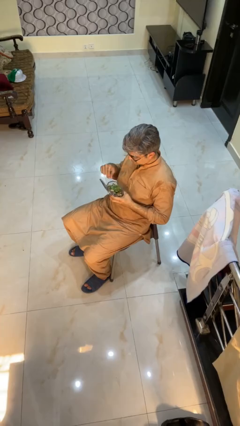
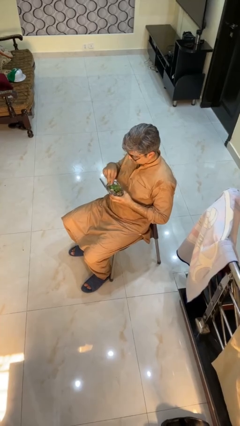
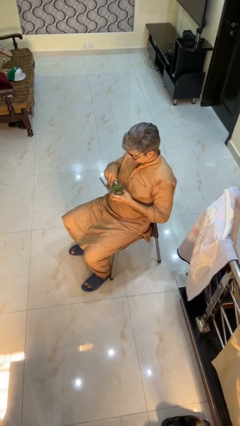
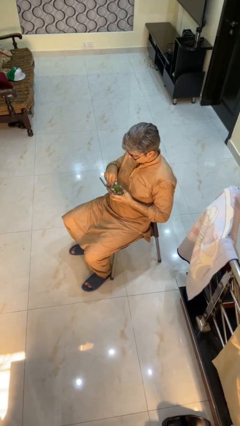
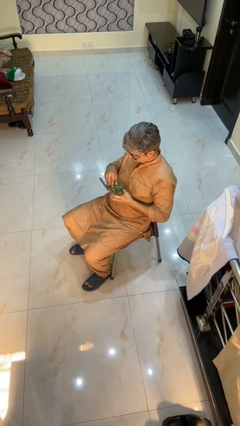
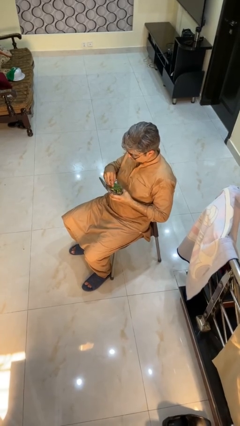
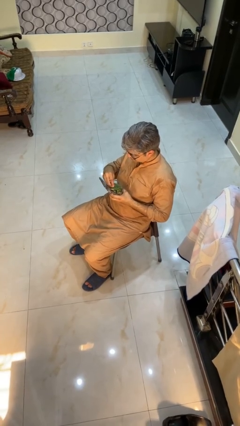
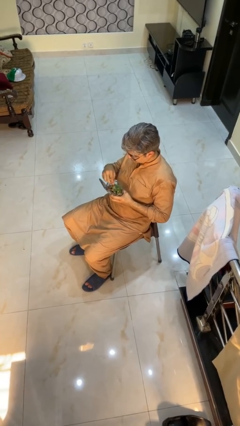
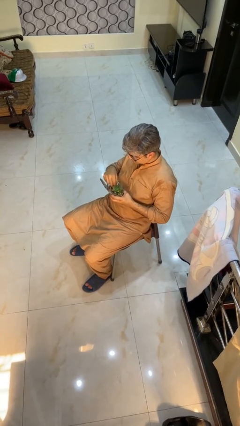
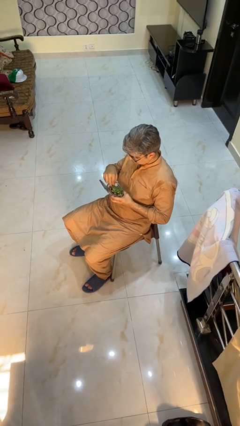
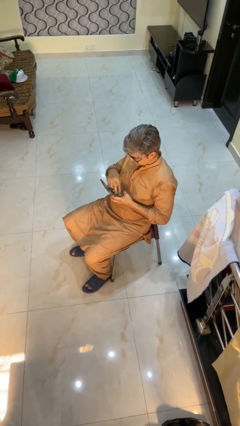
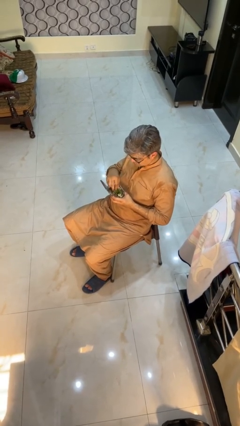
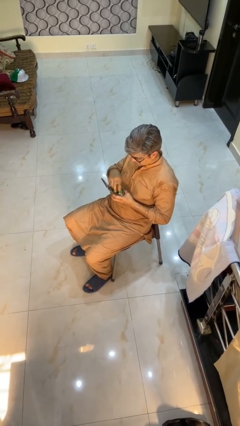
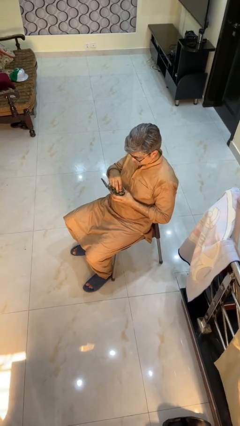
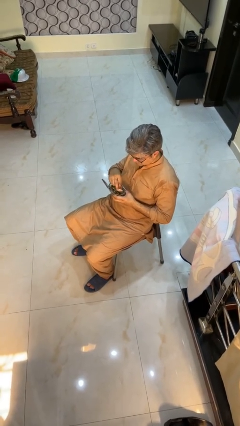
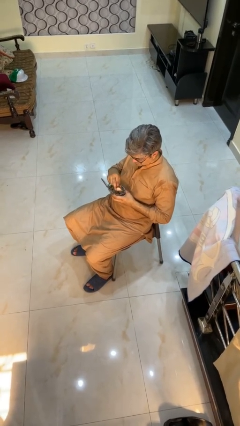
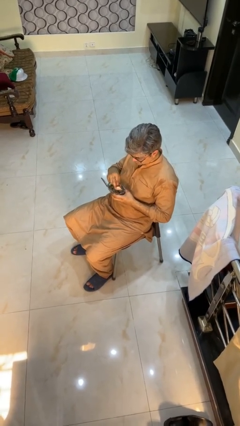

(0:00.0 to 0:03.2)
person searches jewelry box

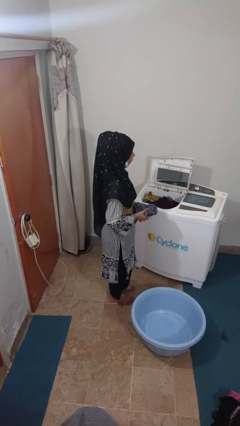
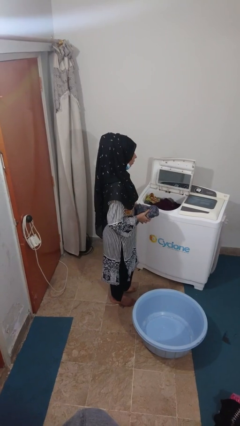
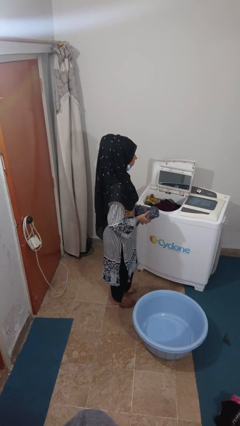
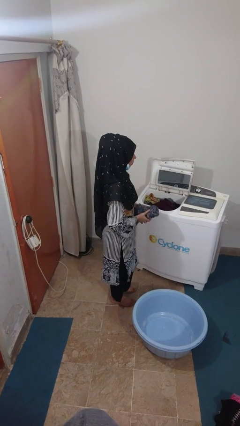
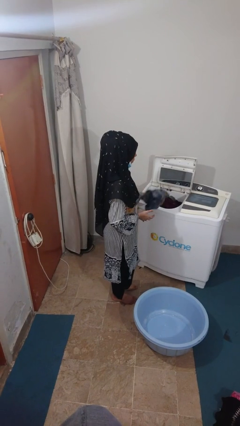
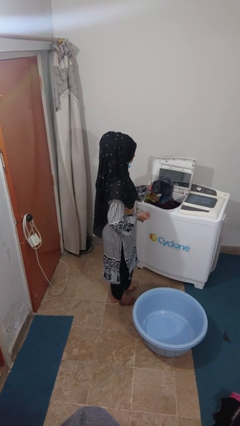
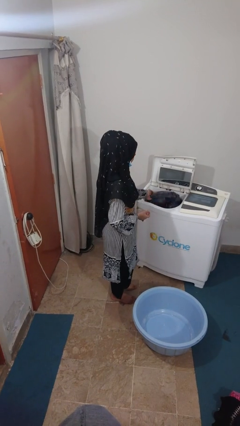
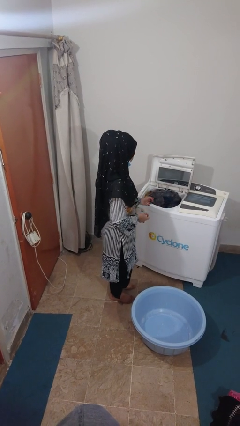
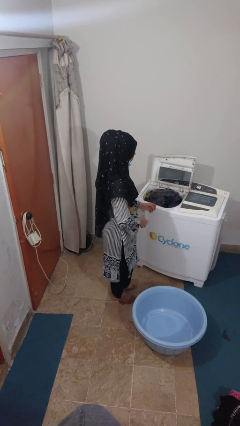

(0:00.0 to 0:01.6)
person loads clotheswasher

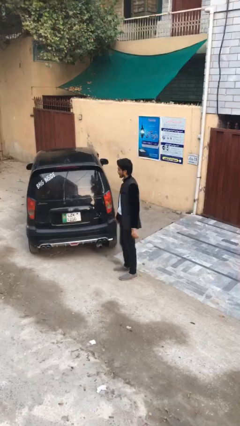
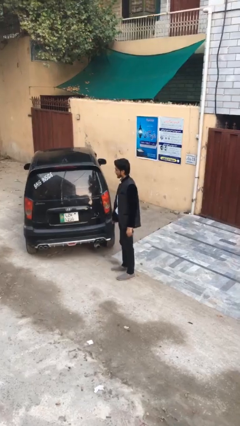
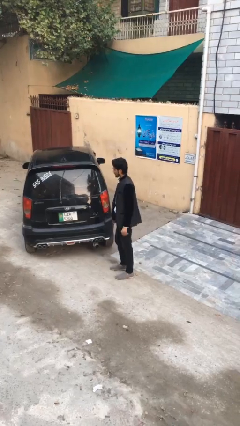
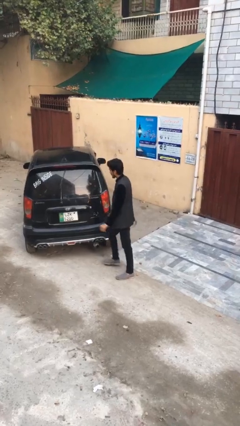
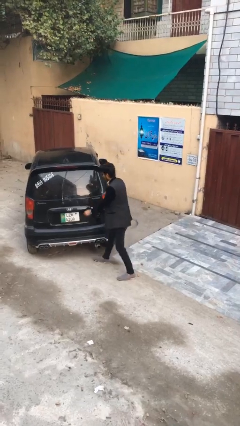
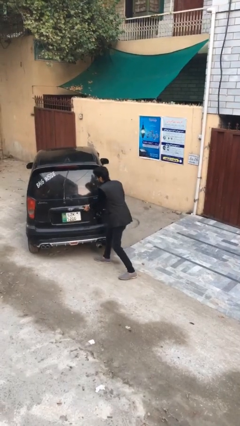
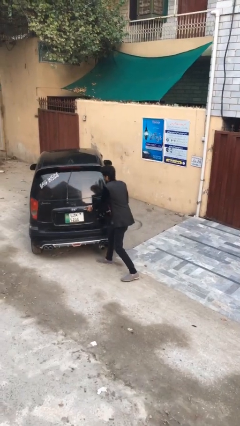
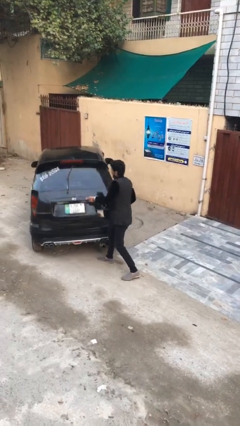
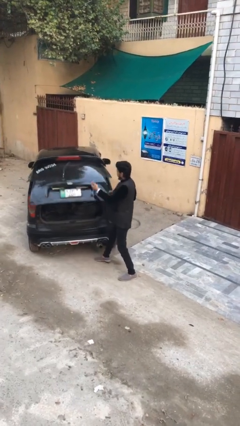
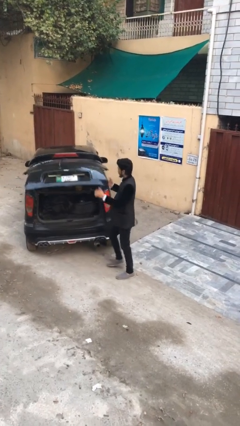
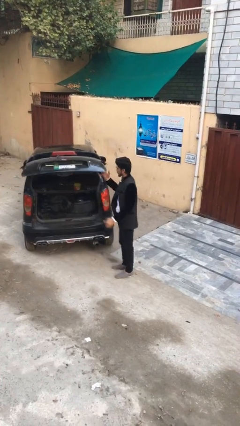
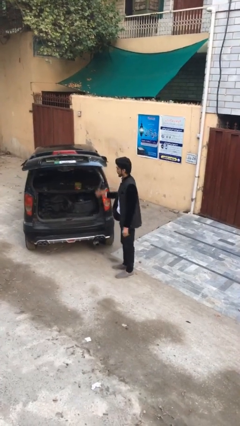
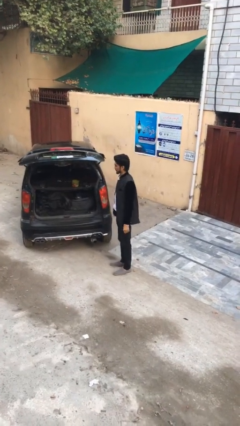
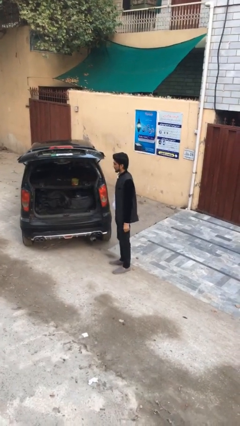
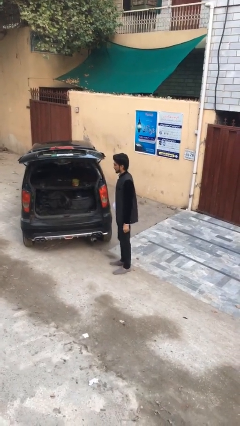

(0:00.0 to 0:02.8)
person opens car trunk

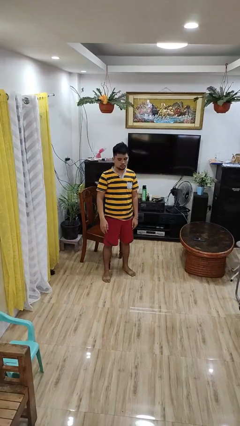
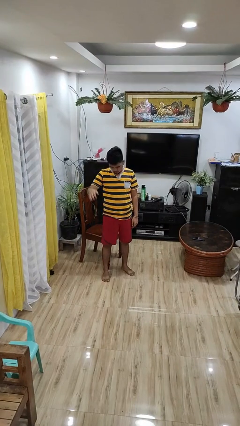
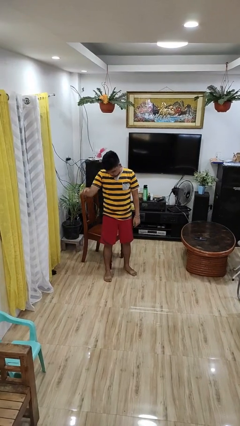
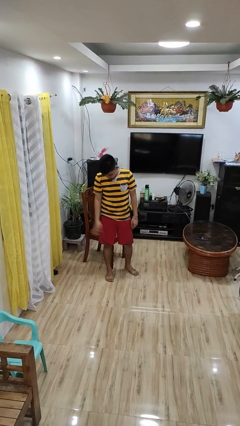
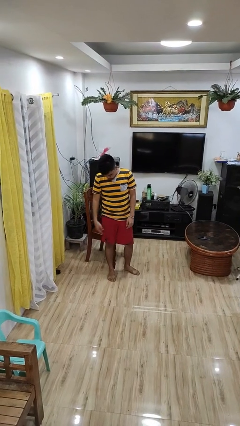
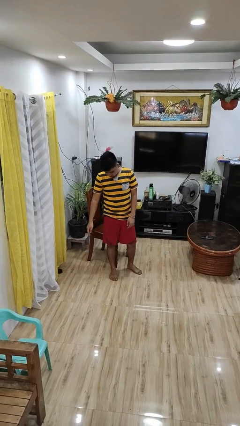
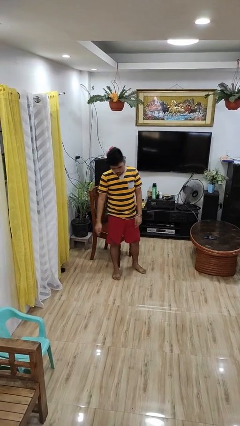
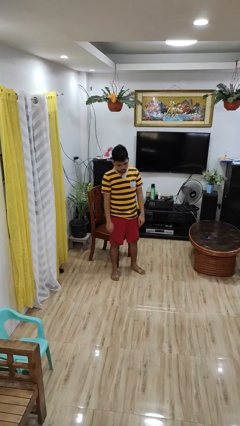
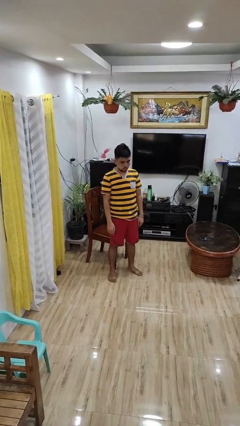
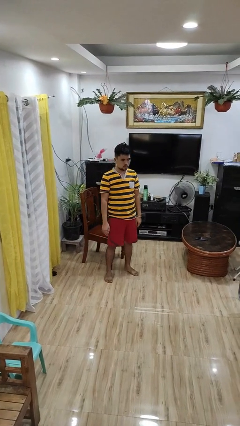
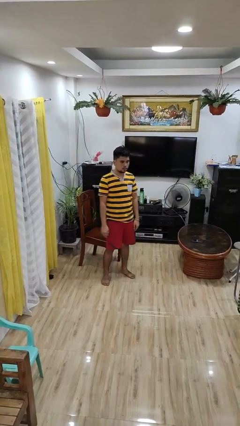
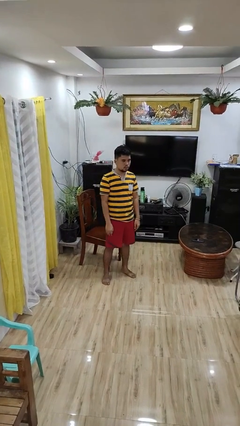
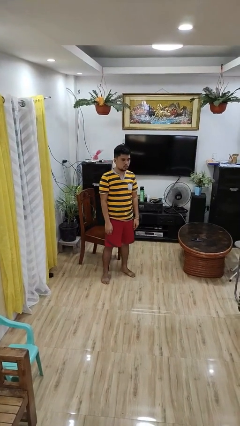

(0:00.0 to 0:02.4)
person slaps hands on thighs

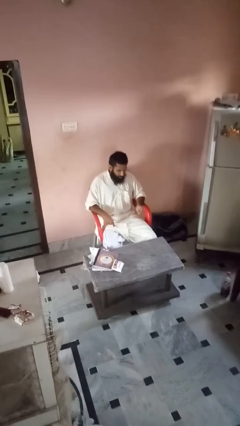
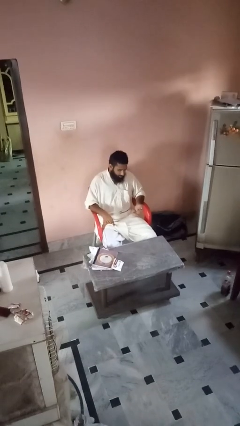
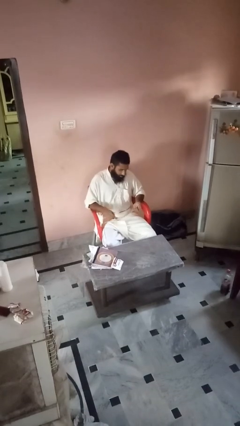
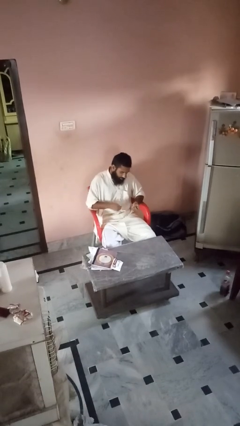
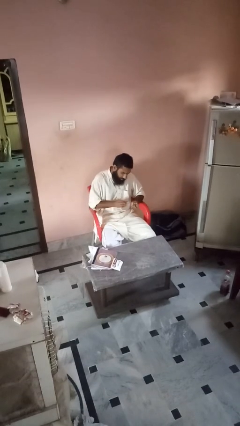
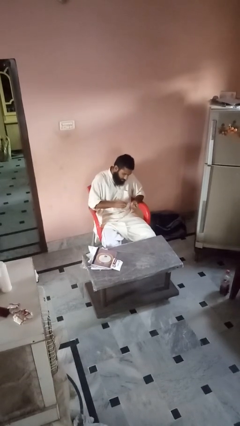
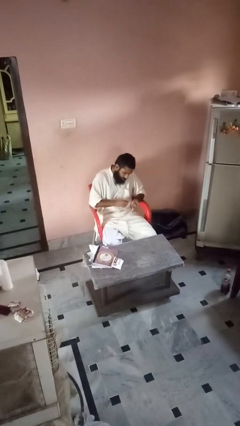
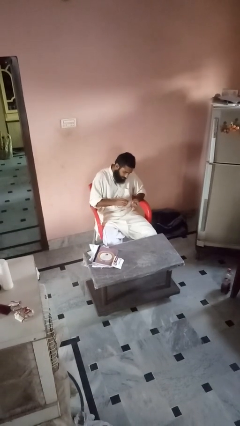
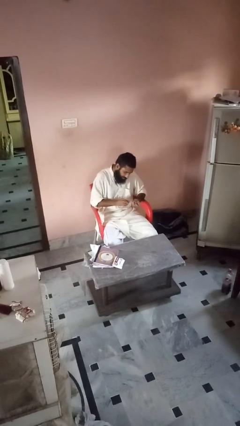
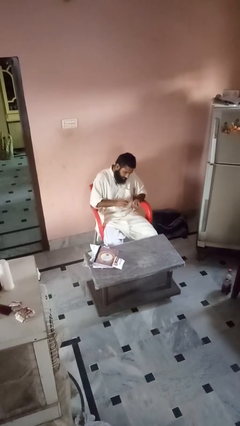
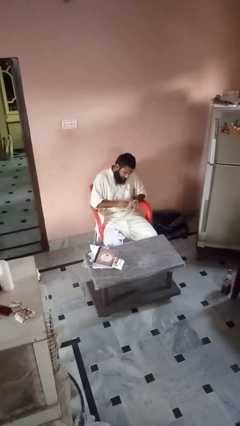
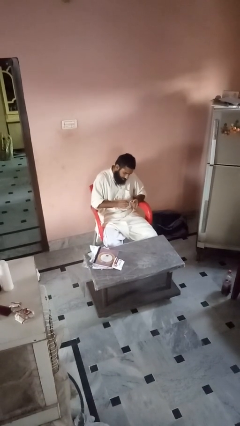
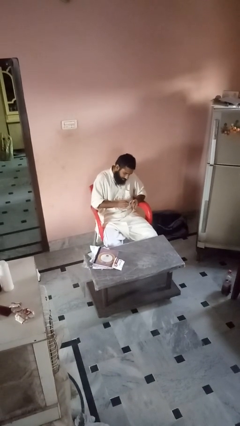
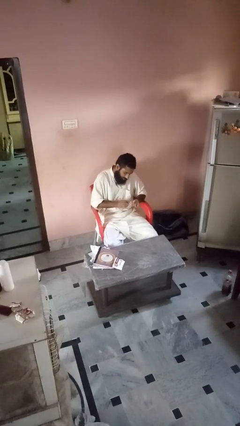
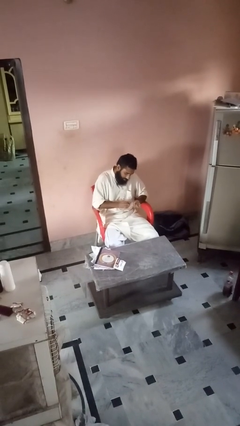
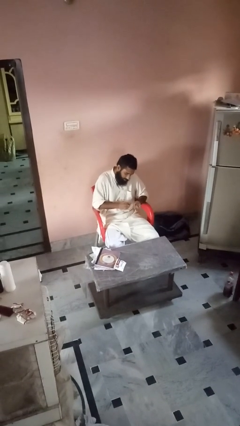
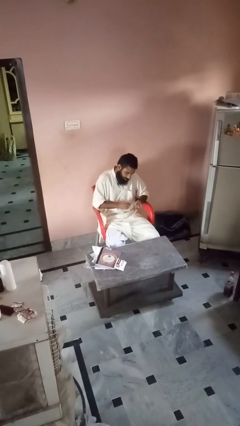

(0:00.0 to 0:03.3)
person files fingernails

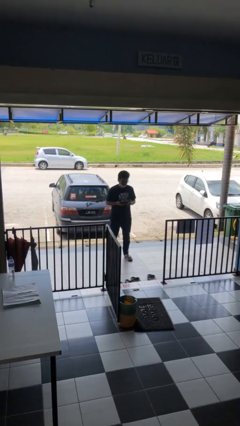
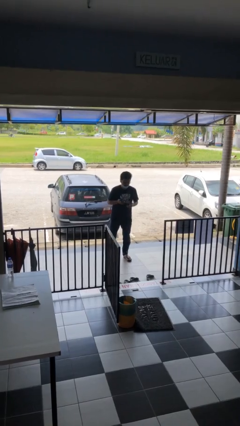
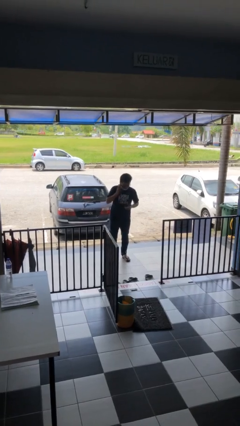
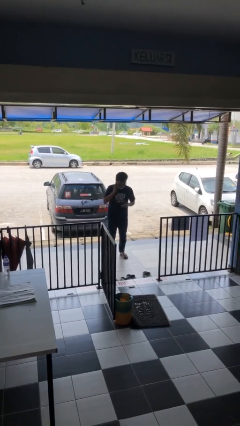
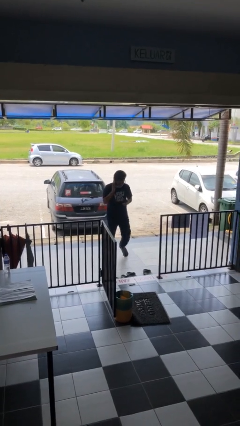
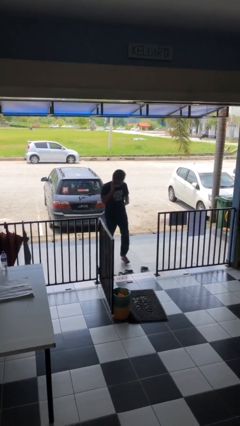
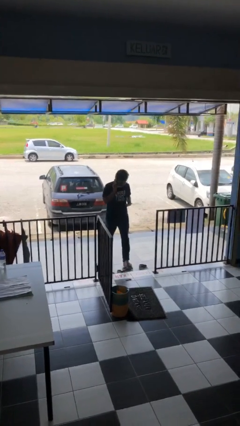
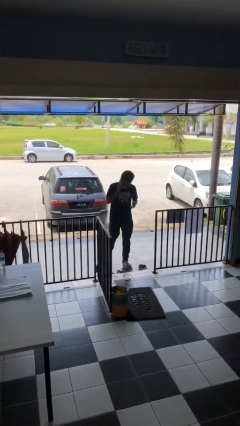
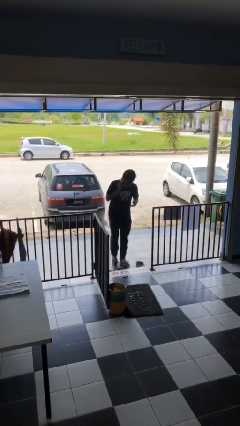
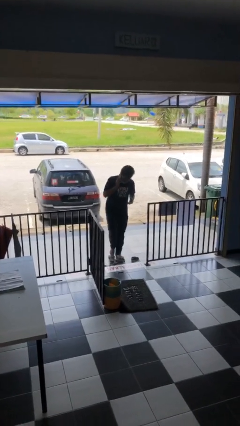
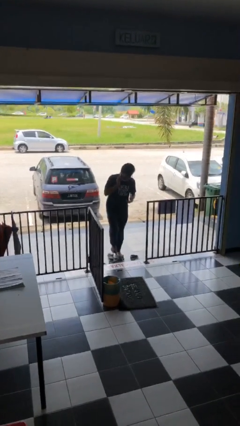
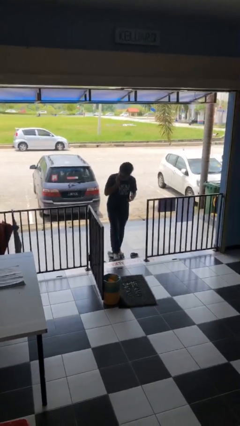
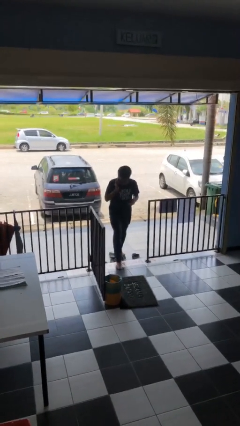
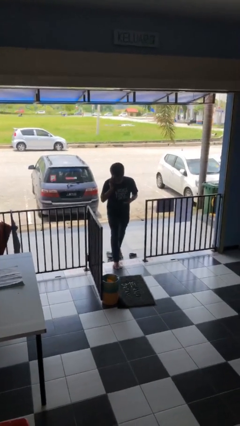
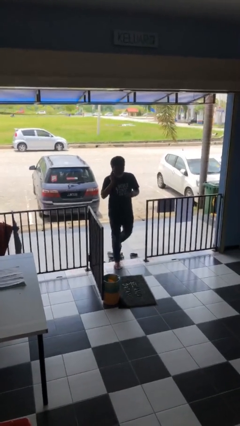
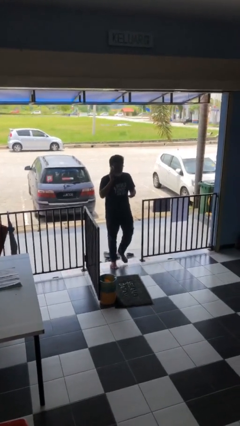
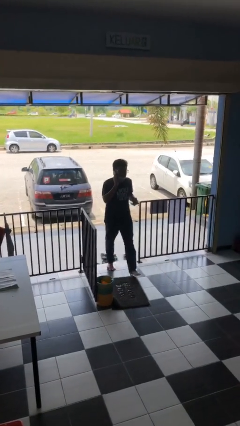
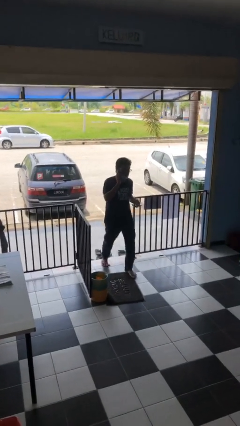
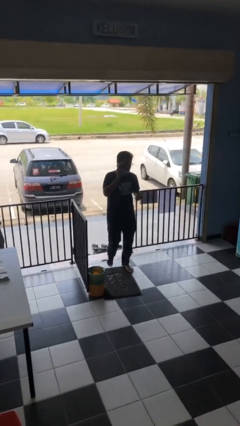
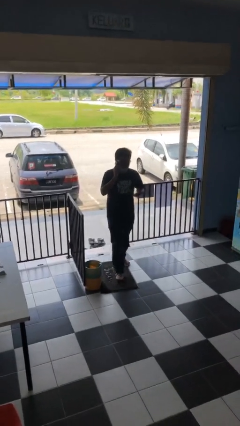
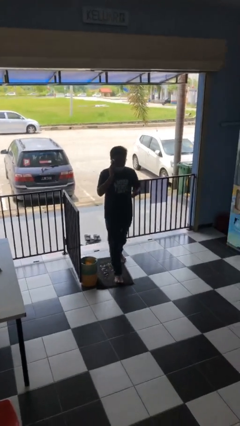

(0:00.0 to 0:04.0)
person enters scene through structure
